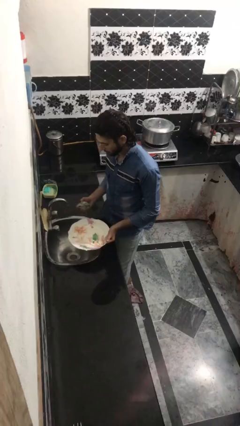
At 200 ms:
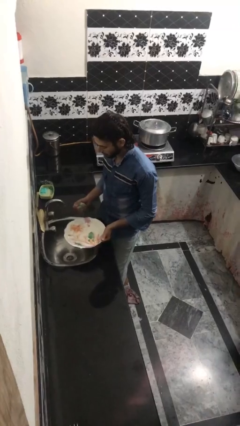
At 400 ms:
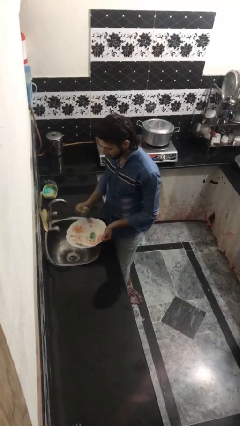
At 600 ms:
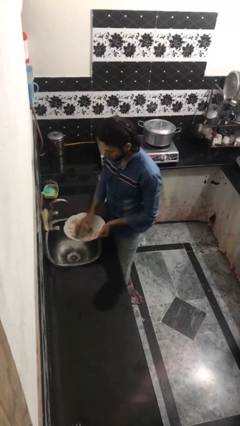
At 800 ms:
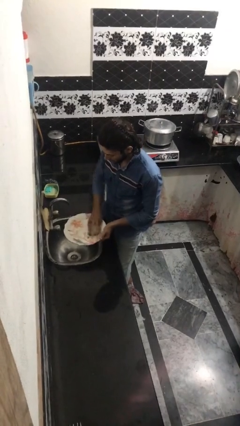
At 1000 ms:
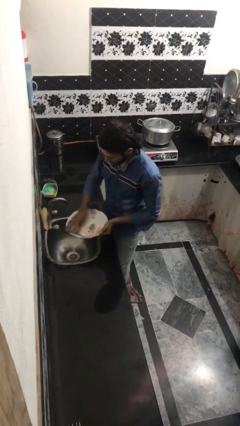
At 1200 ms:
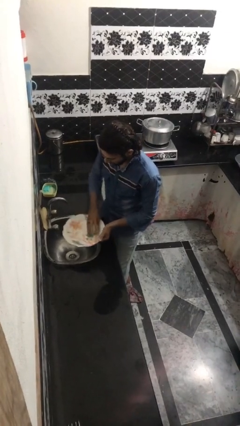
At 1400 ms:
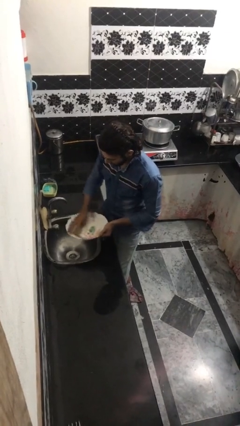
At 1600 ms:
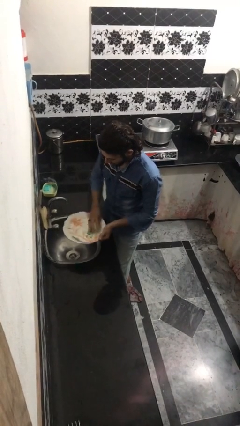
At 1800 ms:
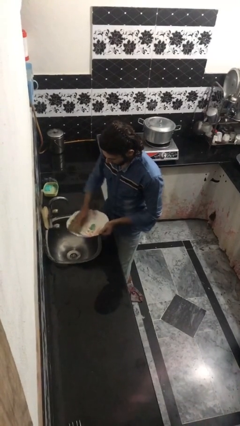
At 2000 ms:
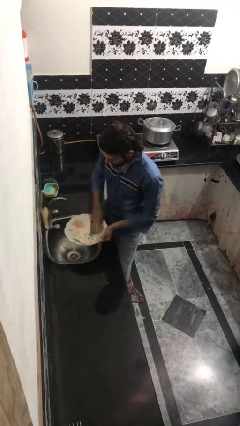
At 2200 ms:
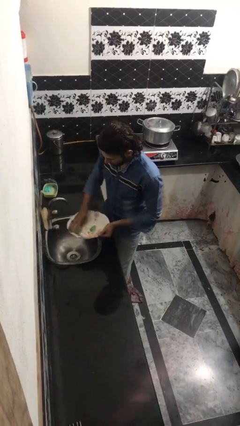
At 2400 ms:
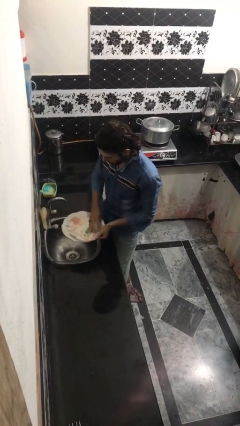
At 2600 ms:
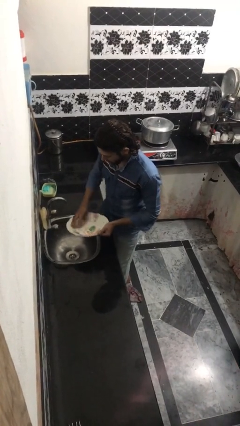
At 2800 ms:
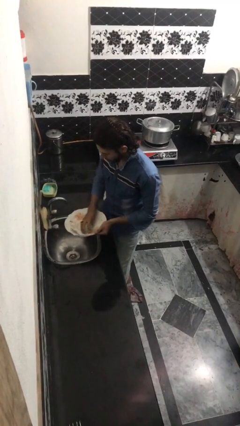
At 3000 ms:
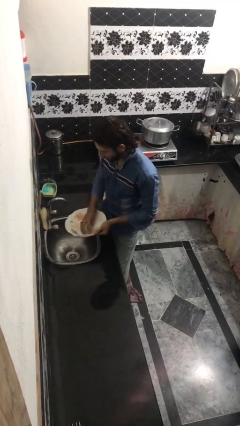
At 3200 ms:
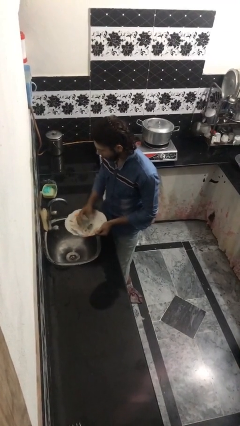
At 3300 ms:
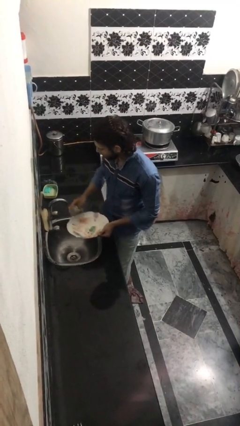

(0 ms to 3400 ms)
person washes dish

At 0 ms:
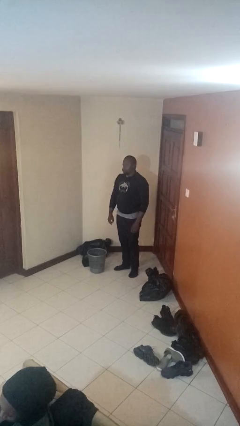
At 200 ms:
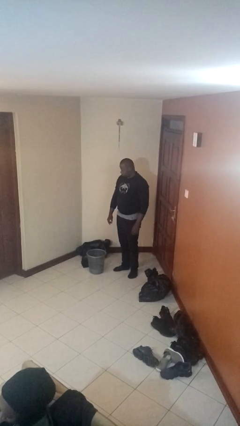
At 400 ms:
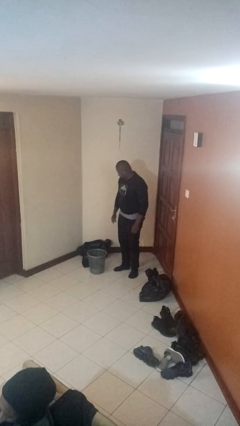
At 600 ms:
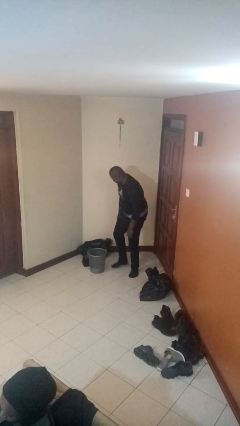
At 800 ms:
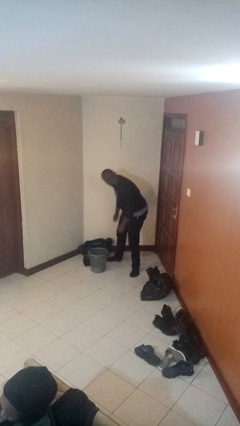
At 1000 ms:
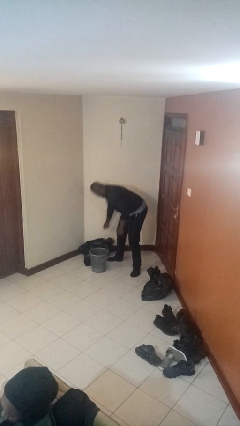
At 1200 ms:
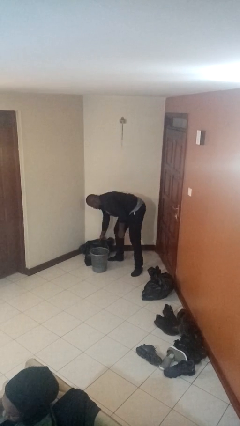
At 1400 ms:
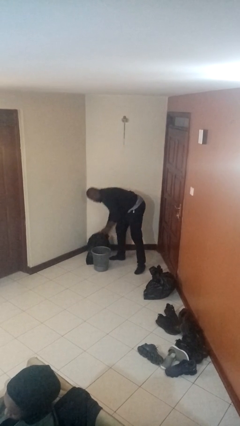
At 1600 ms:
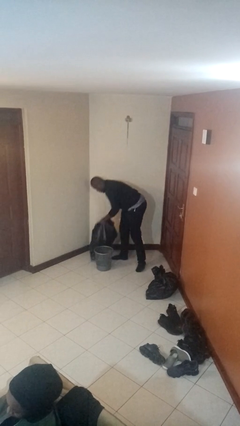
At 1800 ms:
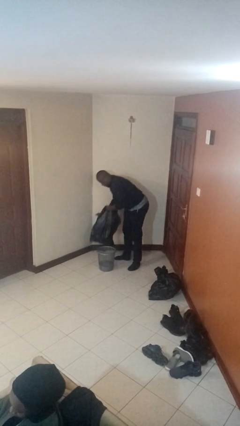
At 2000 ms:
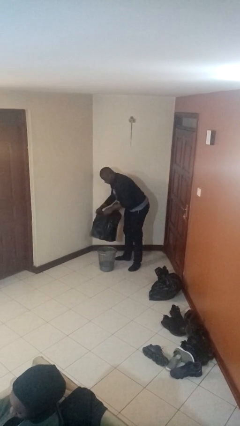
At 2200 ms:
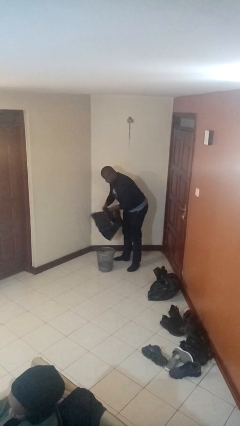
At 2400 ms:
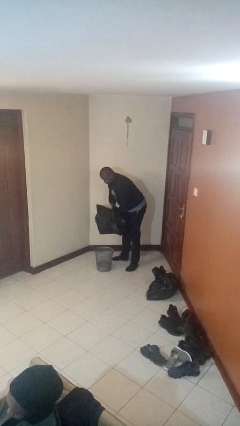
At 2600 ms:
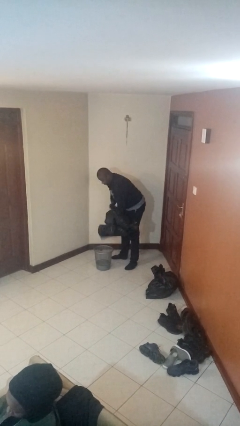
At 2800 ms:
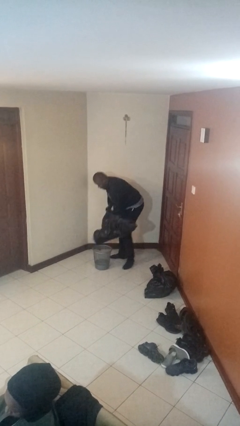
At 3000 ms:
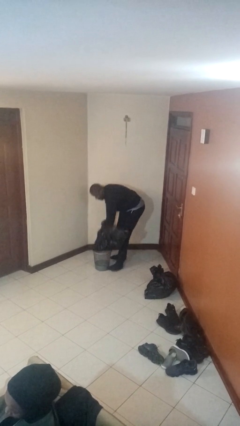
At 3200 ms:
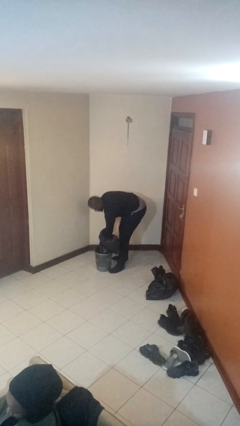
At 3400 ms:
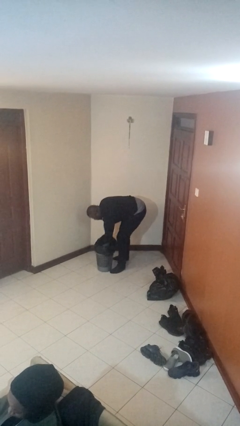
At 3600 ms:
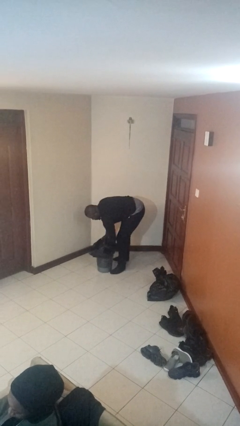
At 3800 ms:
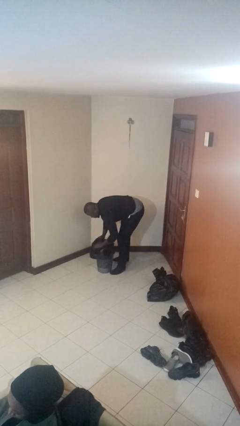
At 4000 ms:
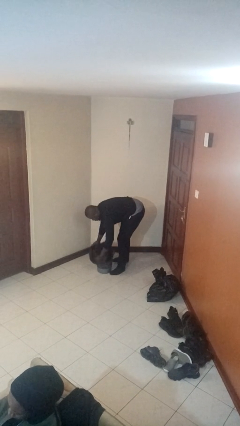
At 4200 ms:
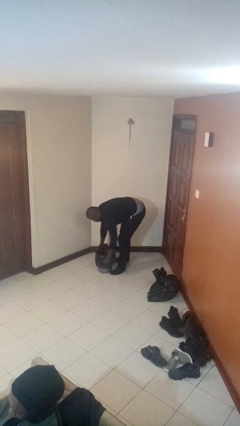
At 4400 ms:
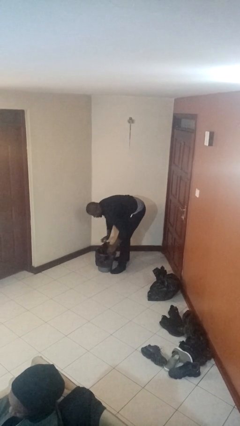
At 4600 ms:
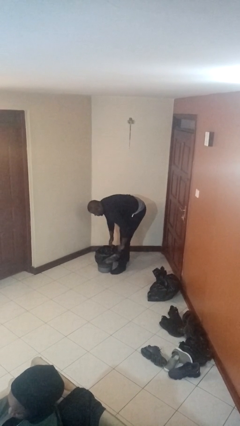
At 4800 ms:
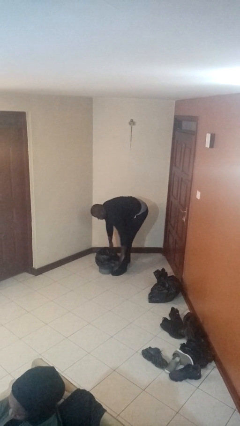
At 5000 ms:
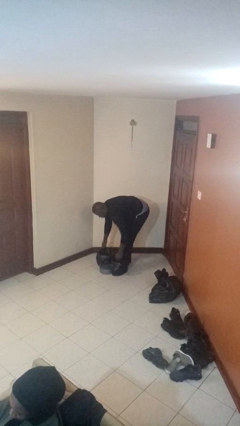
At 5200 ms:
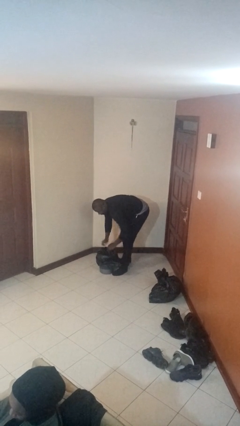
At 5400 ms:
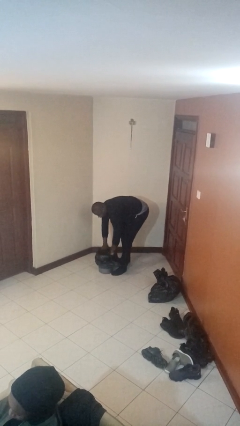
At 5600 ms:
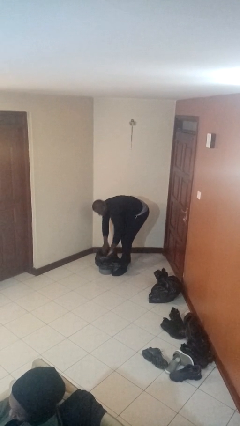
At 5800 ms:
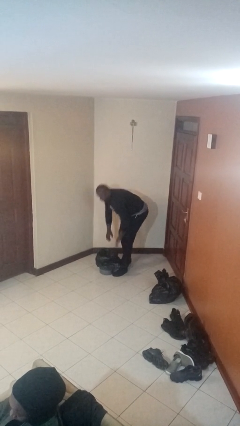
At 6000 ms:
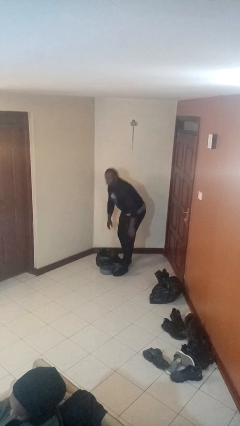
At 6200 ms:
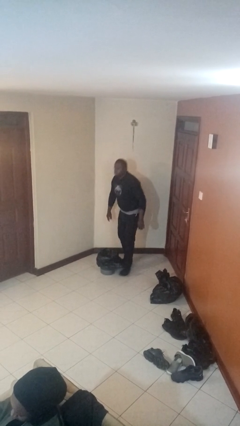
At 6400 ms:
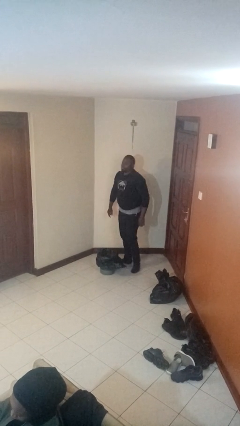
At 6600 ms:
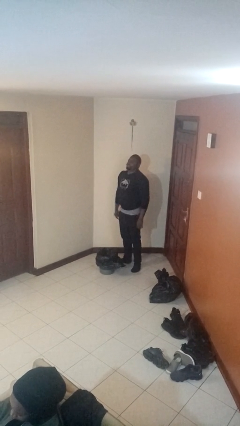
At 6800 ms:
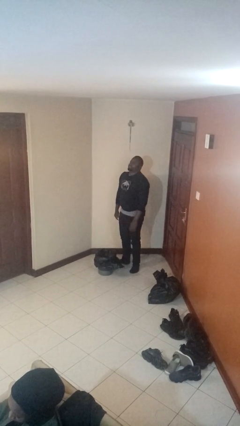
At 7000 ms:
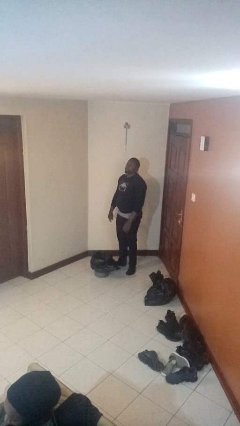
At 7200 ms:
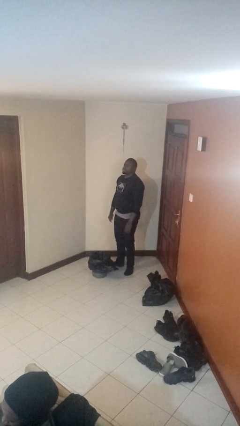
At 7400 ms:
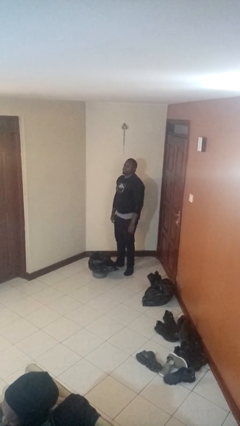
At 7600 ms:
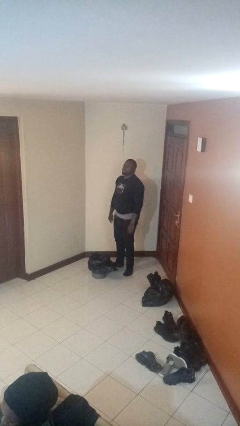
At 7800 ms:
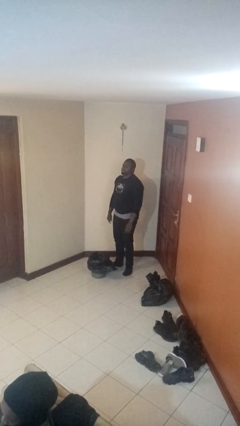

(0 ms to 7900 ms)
person inserts trashbag into trashcan

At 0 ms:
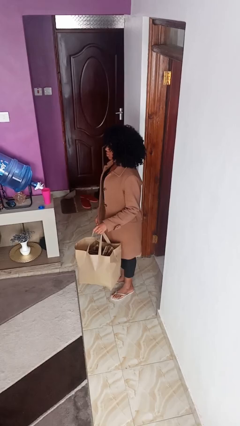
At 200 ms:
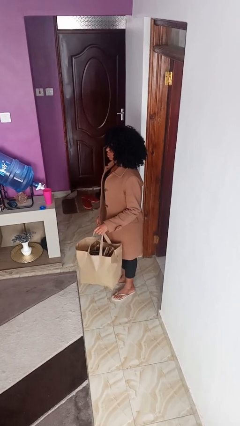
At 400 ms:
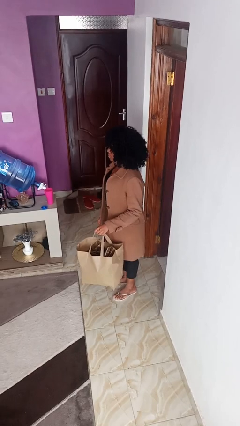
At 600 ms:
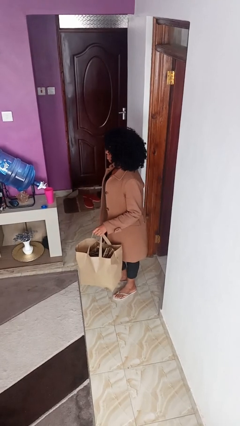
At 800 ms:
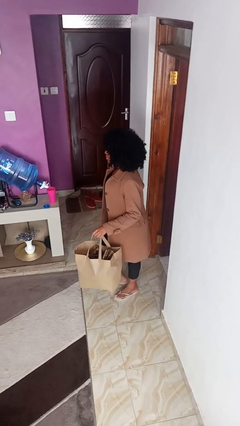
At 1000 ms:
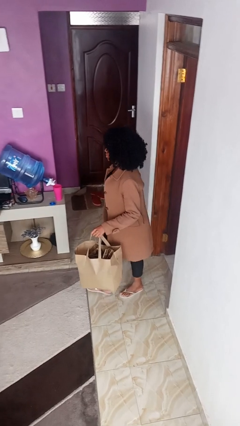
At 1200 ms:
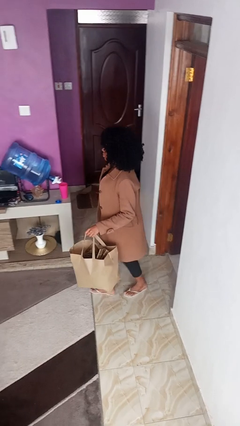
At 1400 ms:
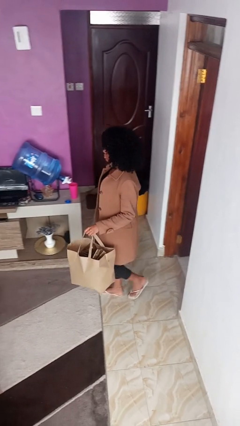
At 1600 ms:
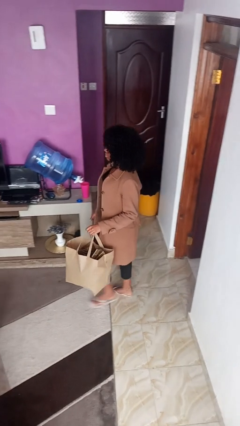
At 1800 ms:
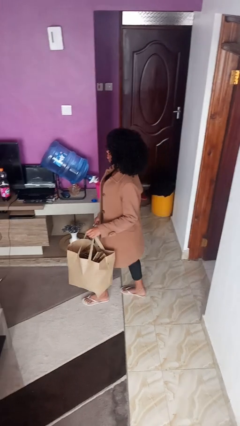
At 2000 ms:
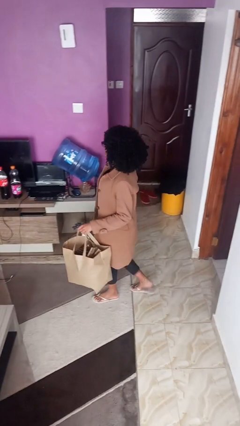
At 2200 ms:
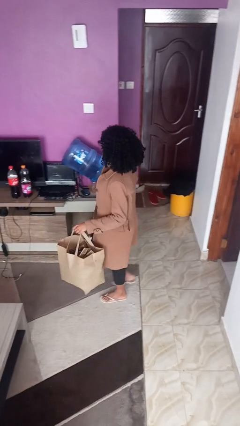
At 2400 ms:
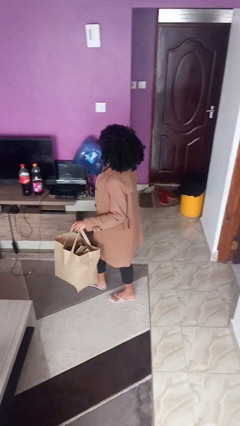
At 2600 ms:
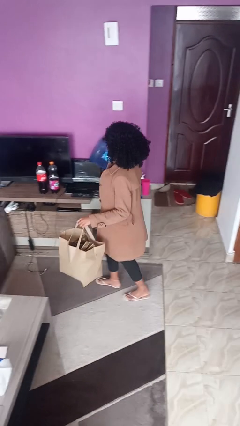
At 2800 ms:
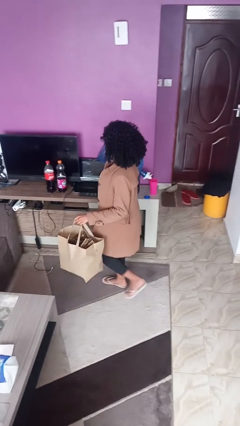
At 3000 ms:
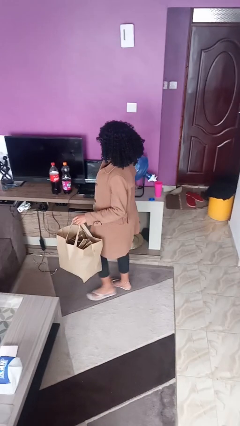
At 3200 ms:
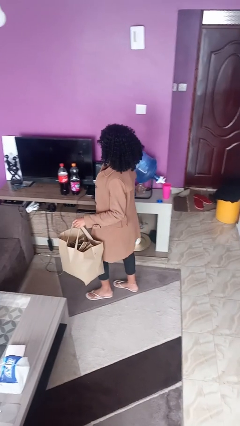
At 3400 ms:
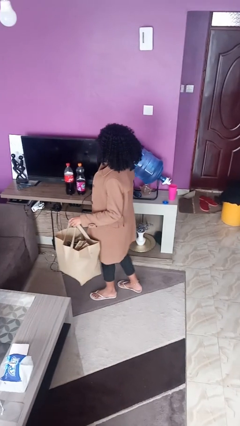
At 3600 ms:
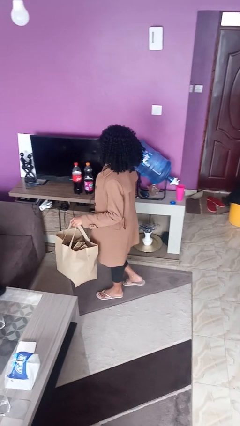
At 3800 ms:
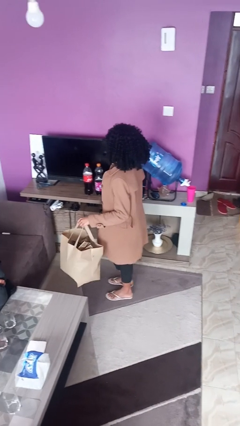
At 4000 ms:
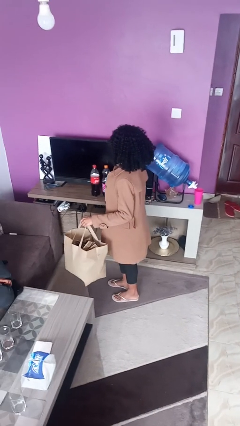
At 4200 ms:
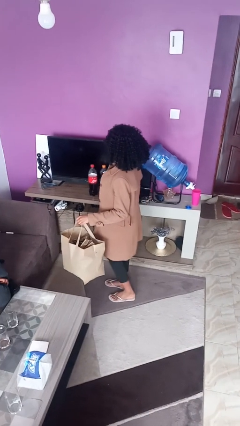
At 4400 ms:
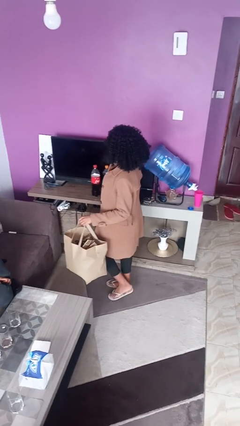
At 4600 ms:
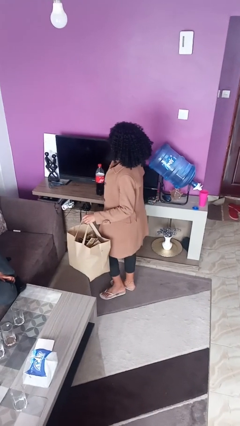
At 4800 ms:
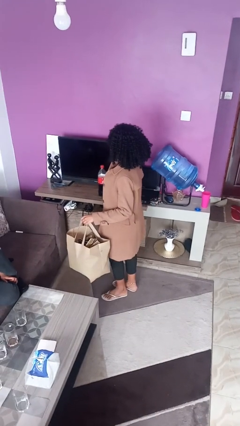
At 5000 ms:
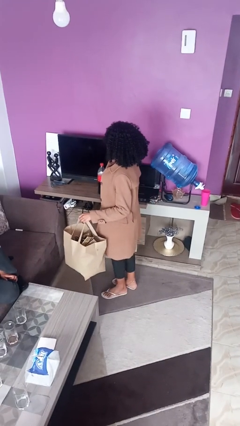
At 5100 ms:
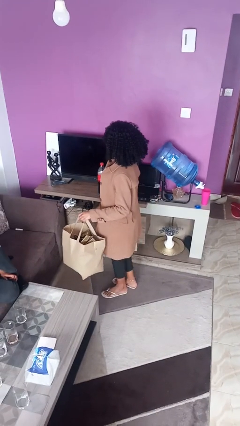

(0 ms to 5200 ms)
person carries groceries

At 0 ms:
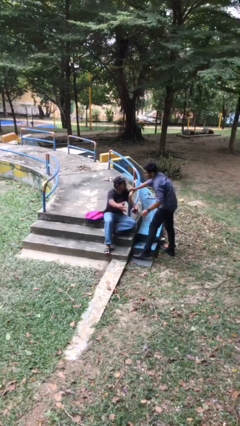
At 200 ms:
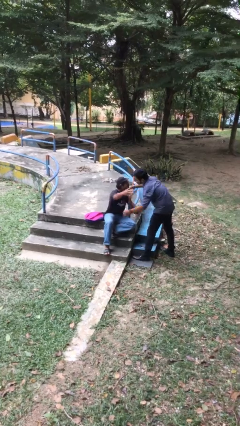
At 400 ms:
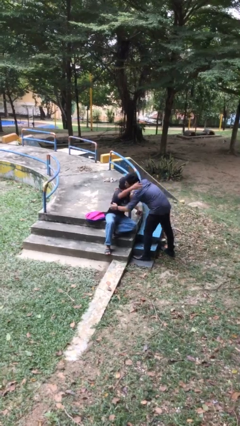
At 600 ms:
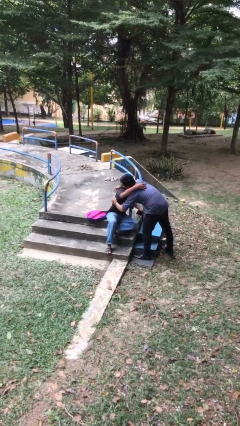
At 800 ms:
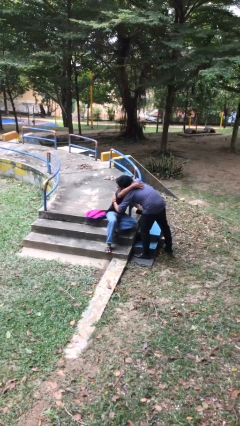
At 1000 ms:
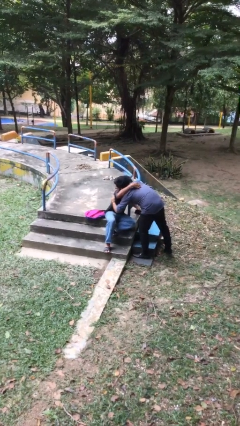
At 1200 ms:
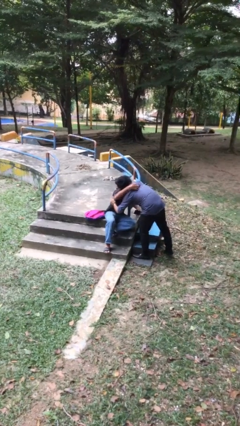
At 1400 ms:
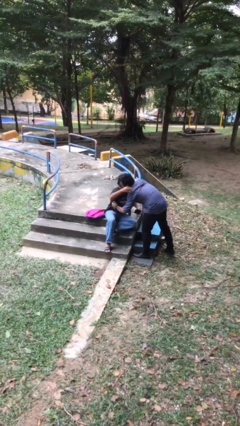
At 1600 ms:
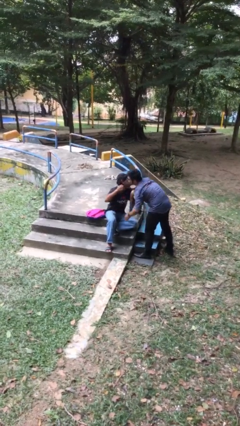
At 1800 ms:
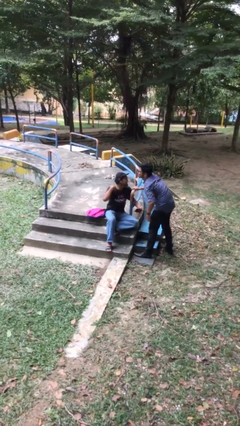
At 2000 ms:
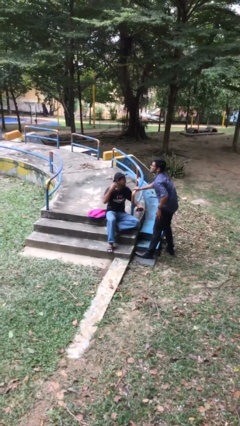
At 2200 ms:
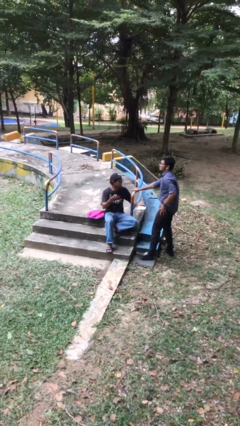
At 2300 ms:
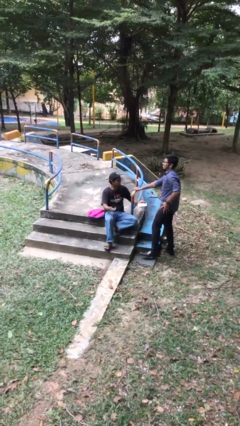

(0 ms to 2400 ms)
person embraces person
